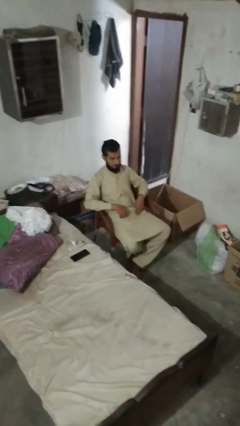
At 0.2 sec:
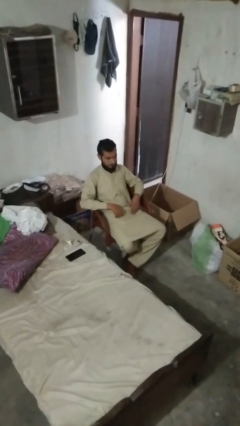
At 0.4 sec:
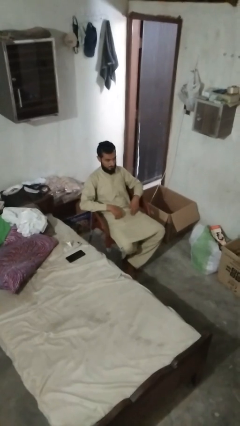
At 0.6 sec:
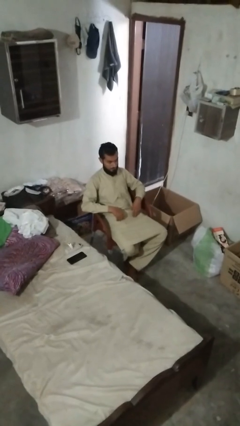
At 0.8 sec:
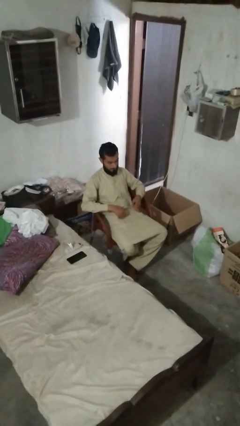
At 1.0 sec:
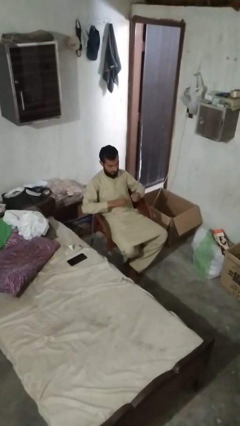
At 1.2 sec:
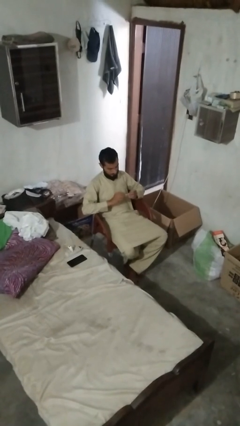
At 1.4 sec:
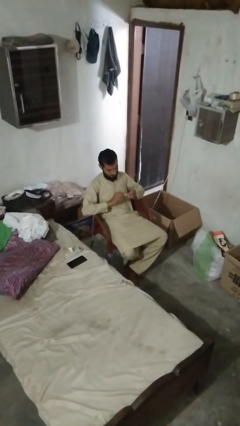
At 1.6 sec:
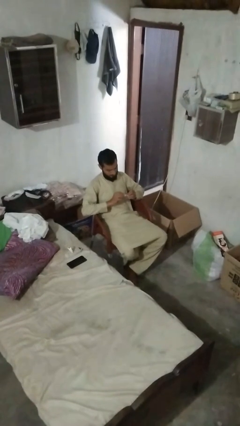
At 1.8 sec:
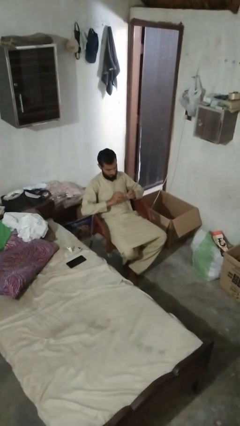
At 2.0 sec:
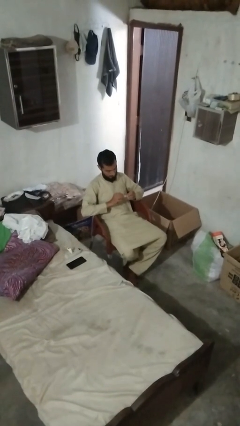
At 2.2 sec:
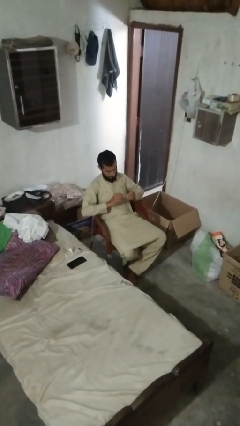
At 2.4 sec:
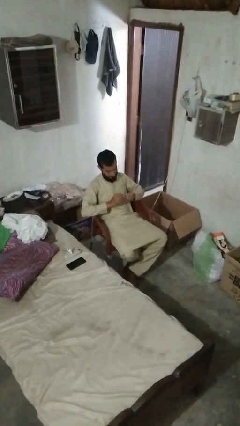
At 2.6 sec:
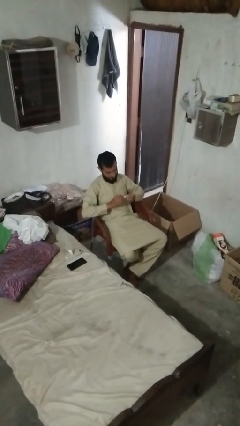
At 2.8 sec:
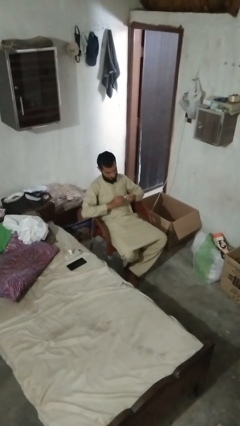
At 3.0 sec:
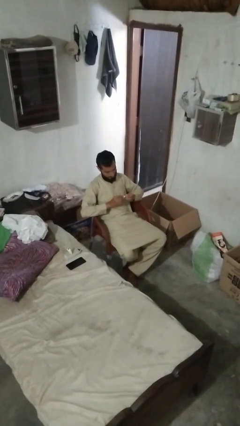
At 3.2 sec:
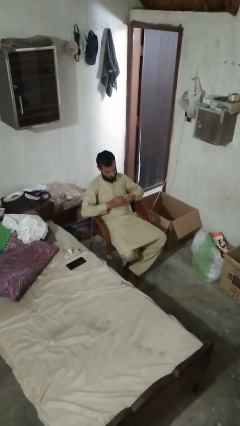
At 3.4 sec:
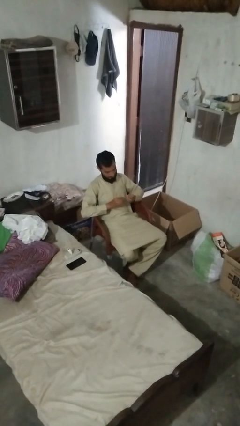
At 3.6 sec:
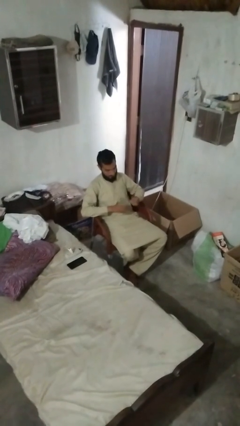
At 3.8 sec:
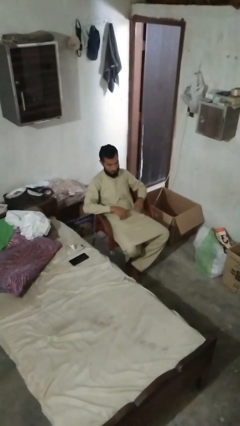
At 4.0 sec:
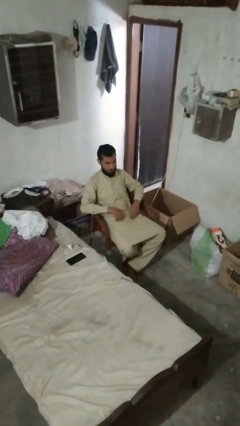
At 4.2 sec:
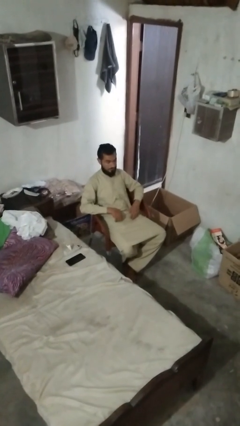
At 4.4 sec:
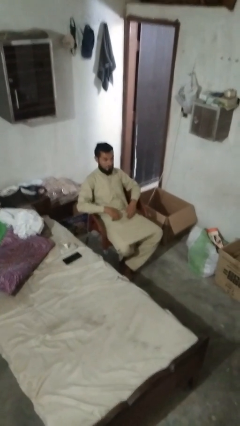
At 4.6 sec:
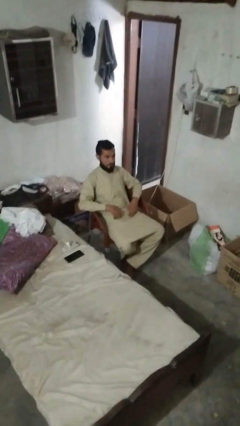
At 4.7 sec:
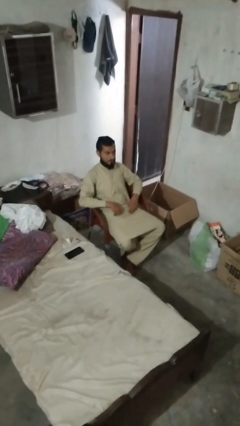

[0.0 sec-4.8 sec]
person clips fingernails

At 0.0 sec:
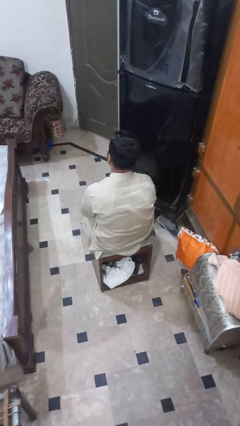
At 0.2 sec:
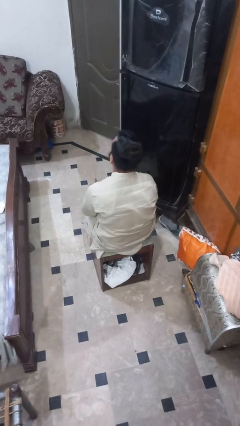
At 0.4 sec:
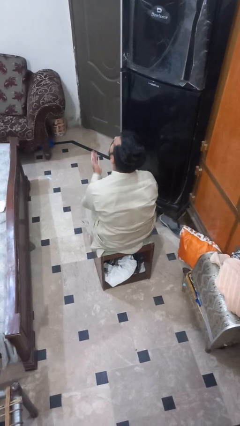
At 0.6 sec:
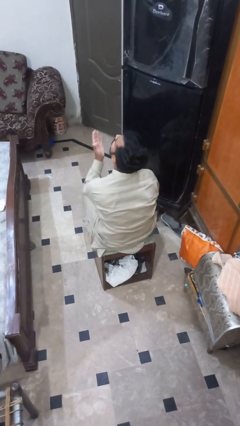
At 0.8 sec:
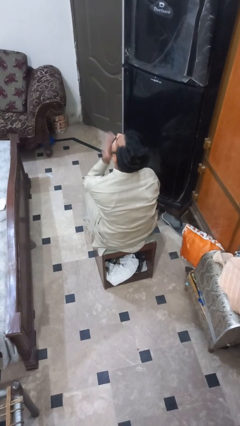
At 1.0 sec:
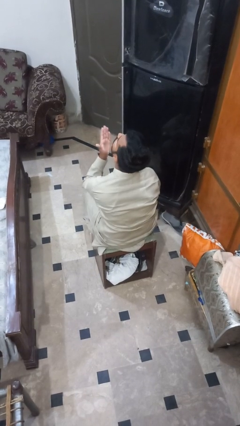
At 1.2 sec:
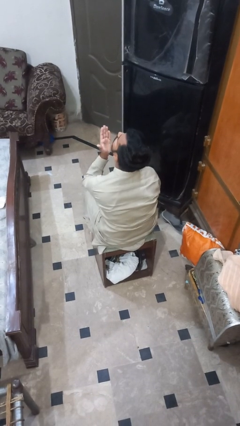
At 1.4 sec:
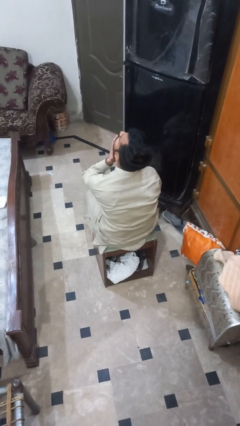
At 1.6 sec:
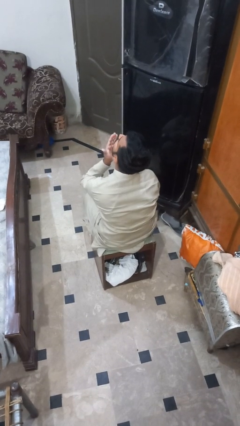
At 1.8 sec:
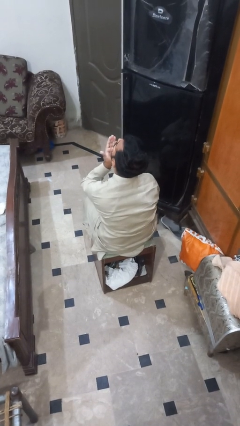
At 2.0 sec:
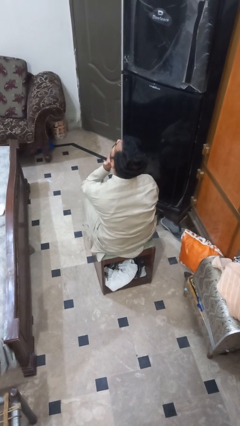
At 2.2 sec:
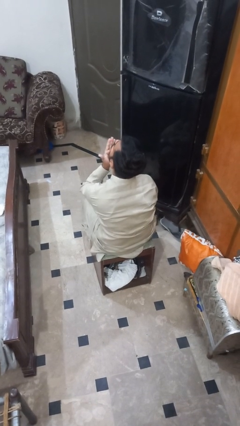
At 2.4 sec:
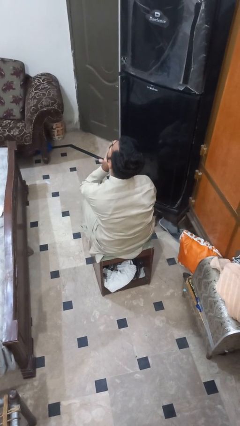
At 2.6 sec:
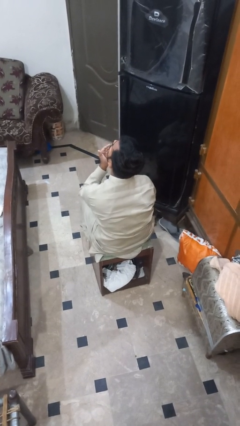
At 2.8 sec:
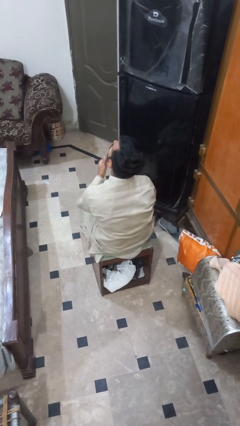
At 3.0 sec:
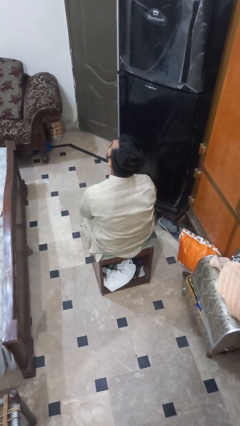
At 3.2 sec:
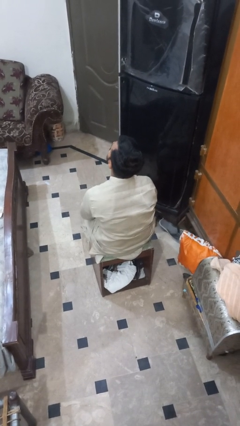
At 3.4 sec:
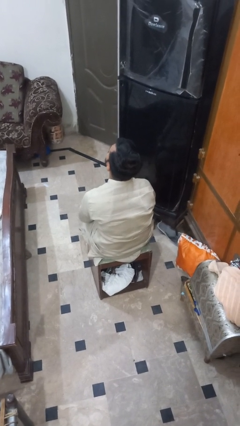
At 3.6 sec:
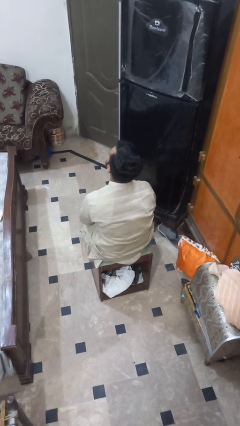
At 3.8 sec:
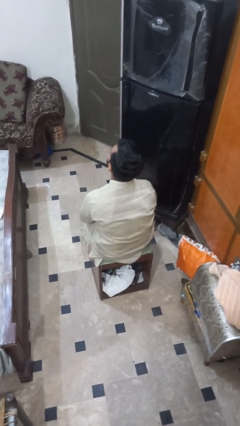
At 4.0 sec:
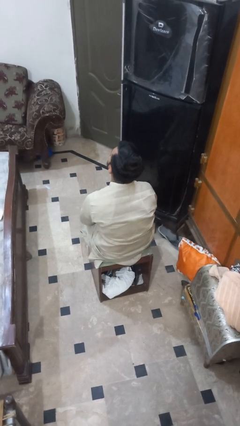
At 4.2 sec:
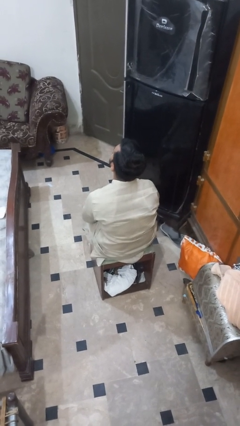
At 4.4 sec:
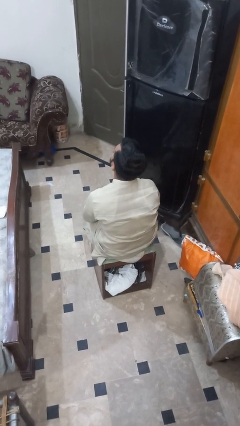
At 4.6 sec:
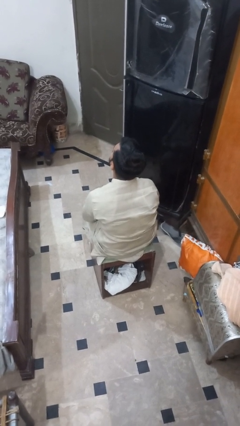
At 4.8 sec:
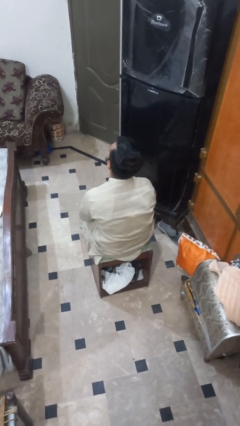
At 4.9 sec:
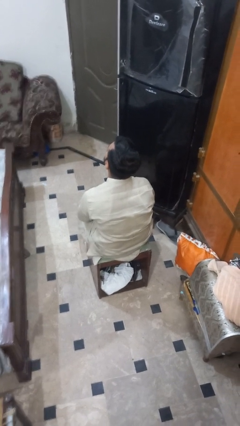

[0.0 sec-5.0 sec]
person strokes chin

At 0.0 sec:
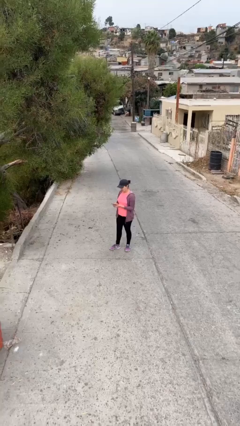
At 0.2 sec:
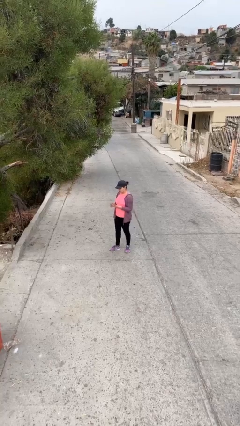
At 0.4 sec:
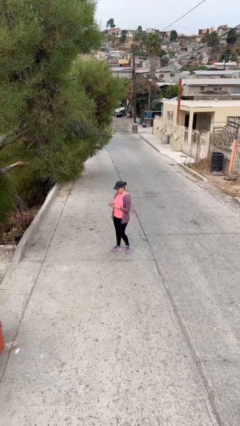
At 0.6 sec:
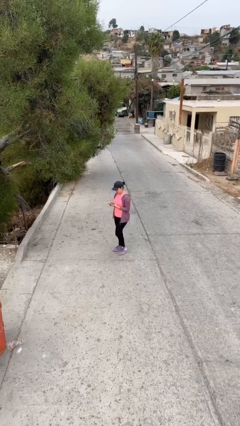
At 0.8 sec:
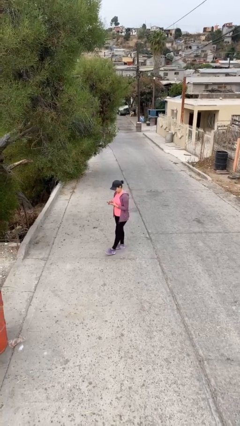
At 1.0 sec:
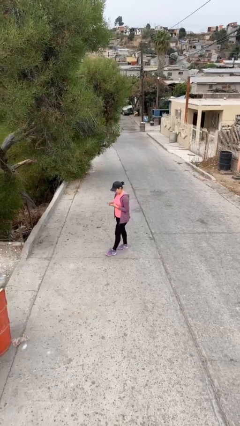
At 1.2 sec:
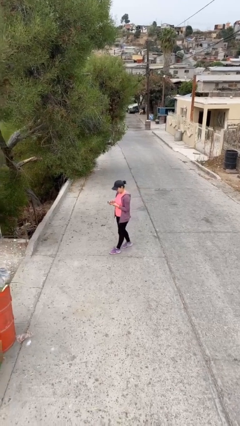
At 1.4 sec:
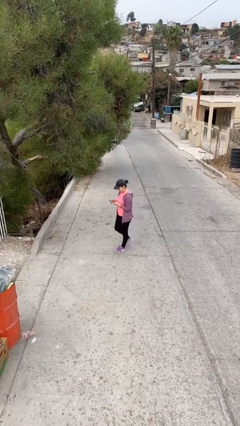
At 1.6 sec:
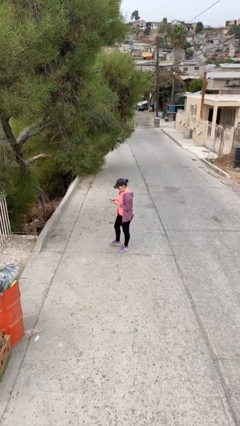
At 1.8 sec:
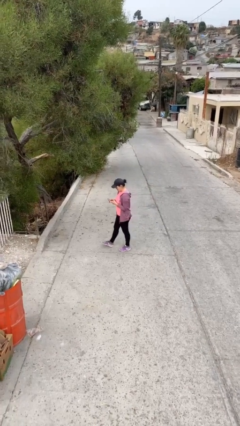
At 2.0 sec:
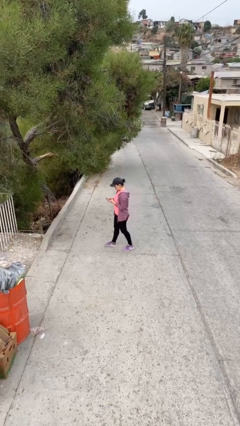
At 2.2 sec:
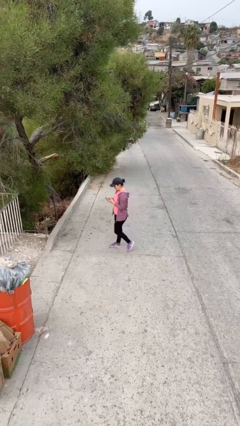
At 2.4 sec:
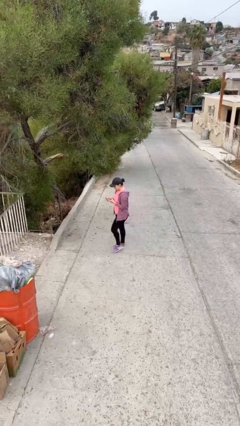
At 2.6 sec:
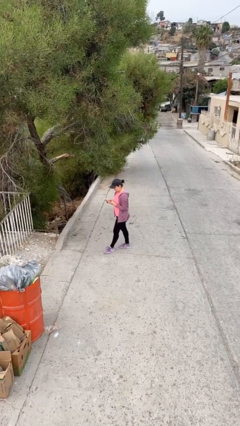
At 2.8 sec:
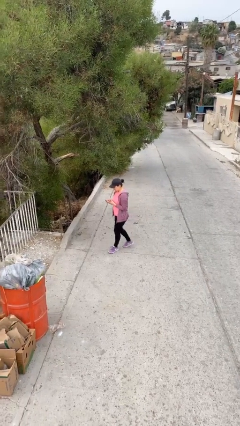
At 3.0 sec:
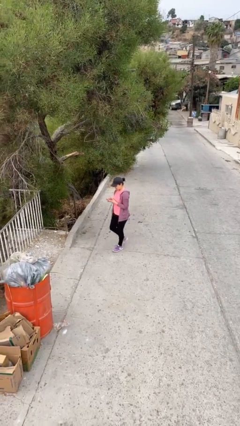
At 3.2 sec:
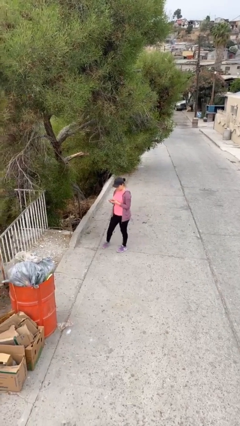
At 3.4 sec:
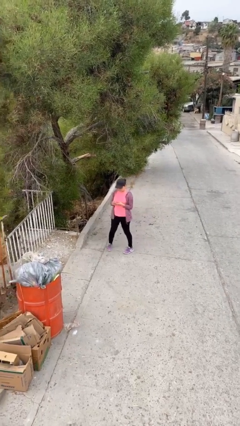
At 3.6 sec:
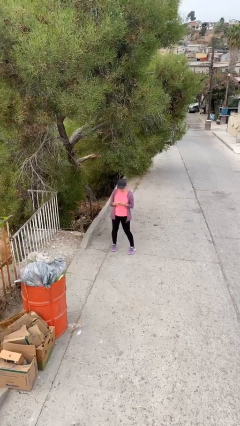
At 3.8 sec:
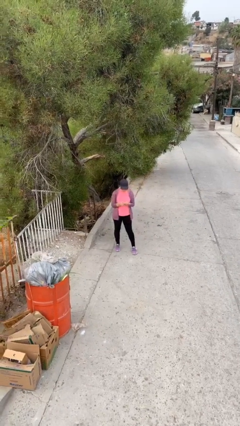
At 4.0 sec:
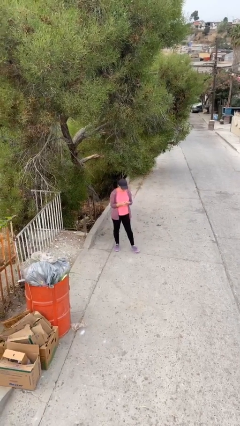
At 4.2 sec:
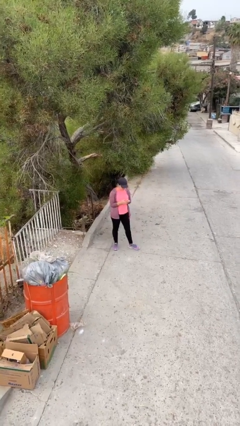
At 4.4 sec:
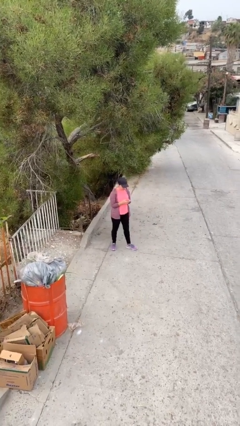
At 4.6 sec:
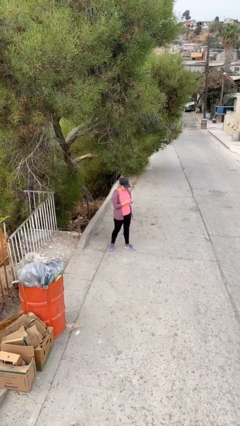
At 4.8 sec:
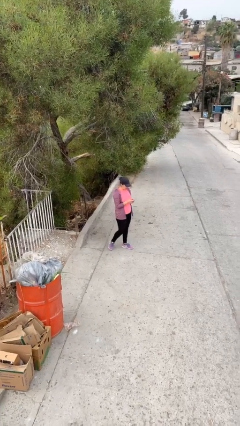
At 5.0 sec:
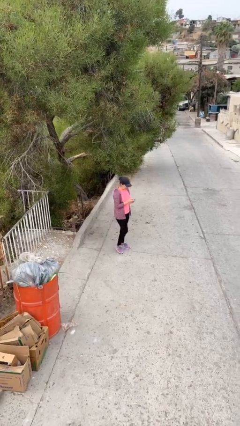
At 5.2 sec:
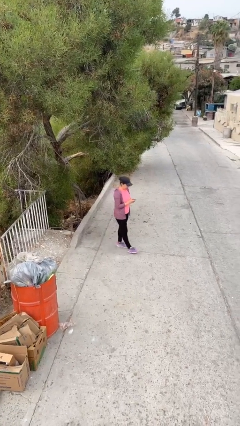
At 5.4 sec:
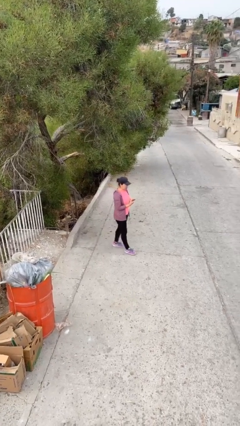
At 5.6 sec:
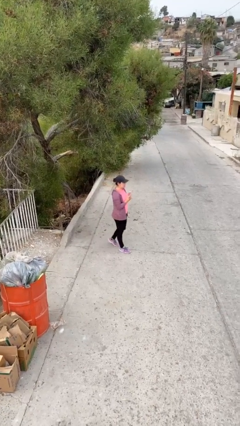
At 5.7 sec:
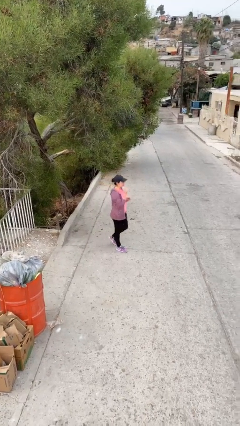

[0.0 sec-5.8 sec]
person texts on phone

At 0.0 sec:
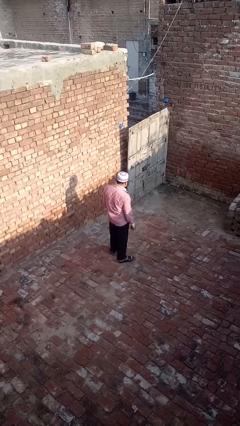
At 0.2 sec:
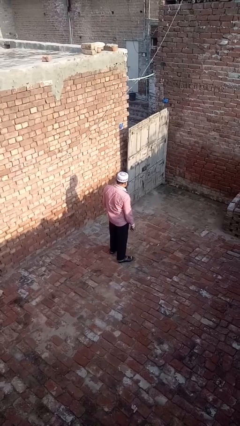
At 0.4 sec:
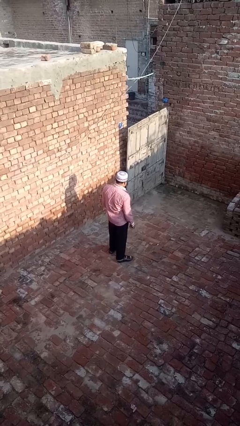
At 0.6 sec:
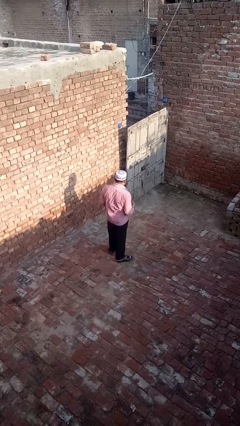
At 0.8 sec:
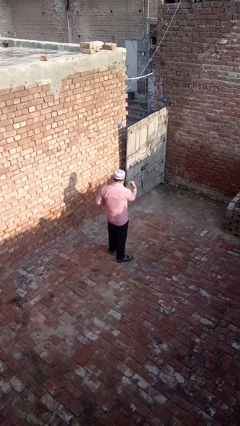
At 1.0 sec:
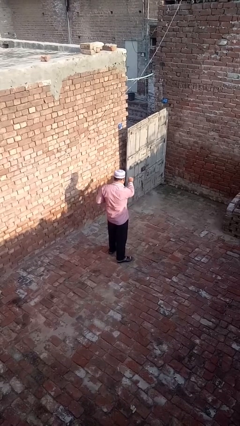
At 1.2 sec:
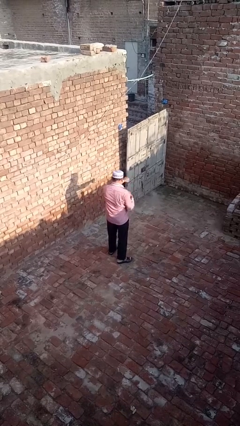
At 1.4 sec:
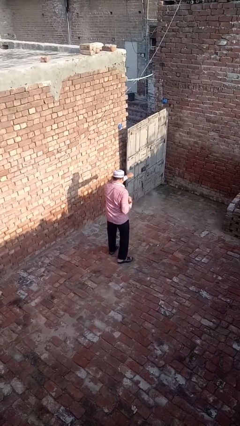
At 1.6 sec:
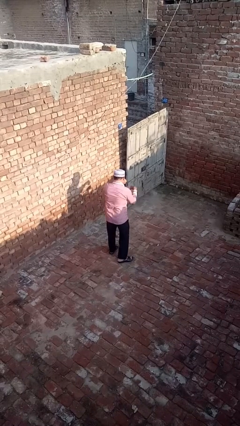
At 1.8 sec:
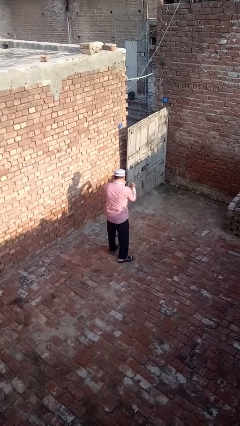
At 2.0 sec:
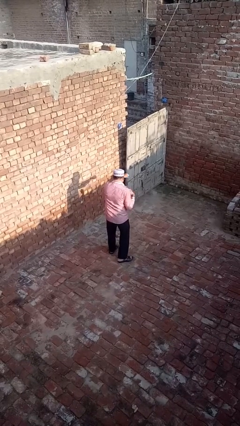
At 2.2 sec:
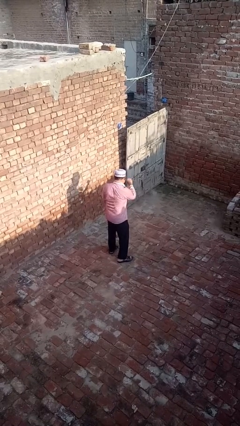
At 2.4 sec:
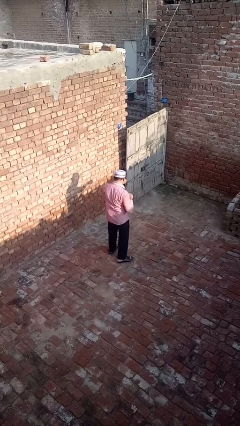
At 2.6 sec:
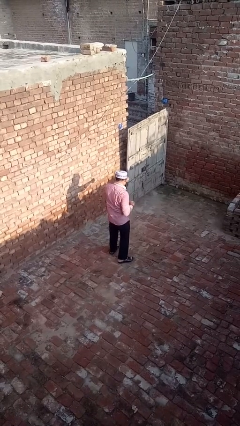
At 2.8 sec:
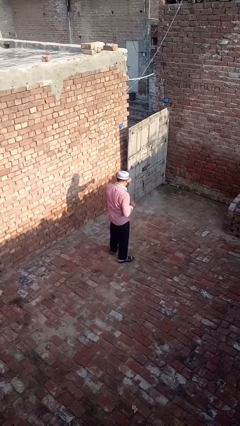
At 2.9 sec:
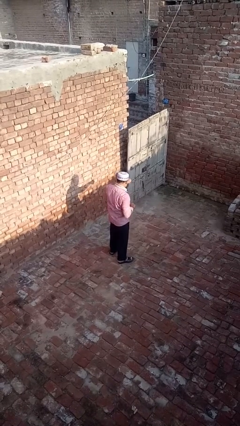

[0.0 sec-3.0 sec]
person punches
